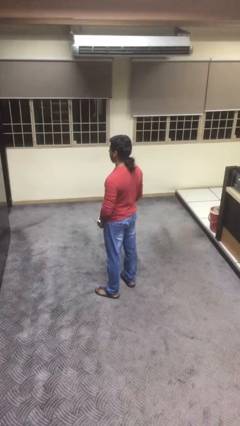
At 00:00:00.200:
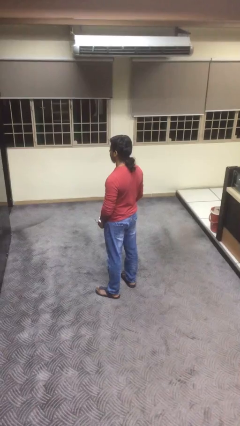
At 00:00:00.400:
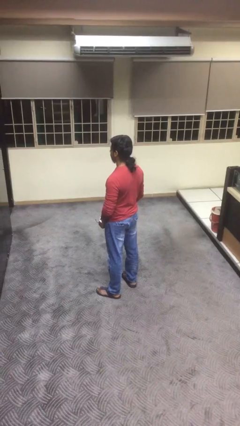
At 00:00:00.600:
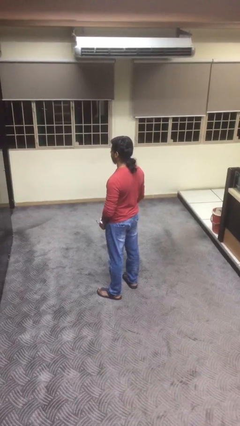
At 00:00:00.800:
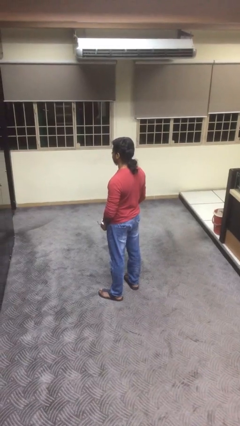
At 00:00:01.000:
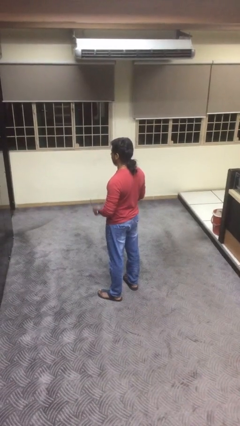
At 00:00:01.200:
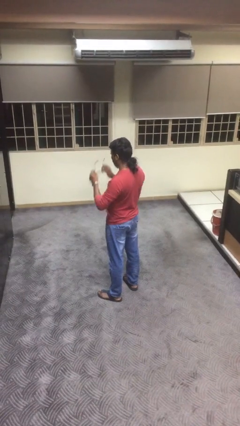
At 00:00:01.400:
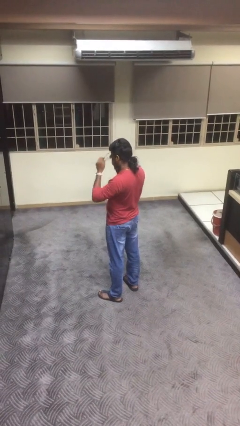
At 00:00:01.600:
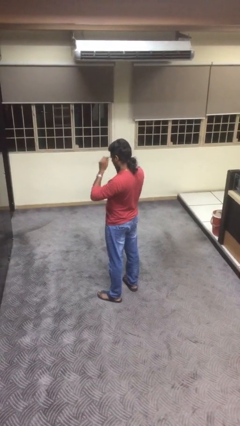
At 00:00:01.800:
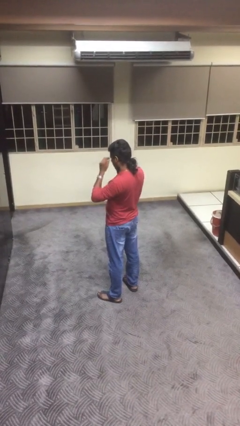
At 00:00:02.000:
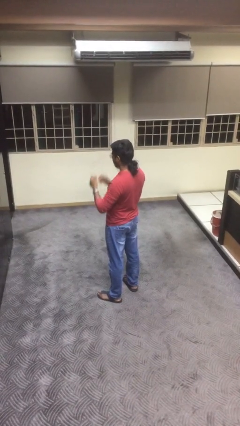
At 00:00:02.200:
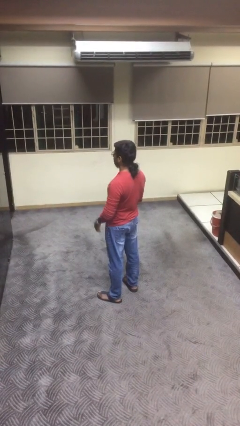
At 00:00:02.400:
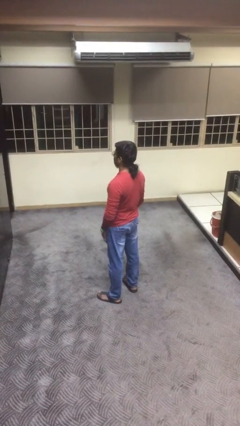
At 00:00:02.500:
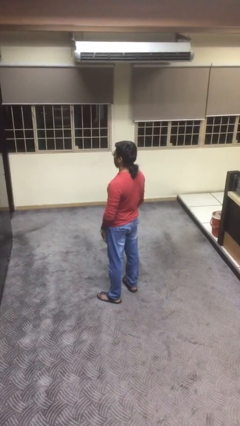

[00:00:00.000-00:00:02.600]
person puts on glasses

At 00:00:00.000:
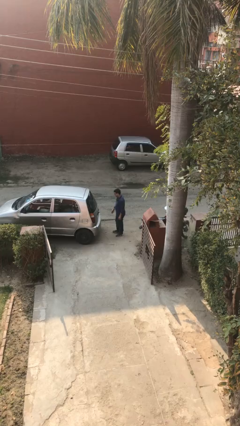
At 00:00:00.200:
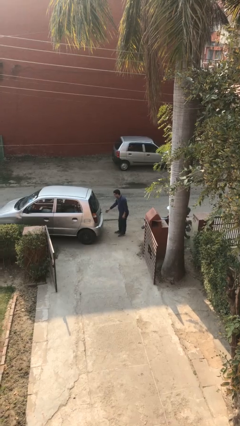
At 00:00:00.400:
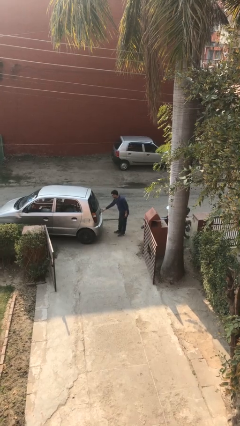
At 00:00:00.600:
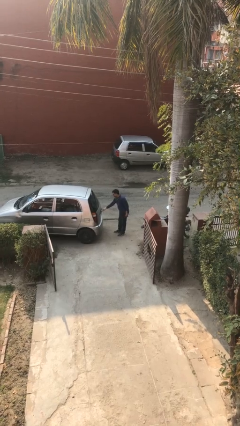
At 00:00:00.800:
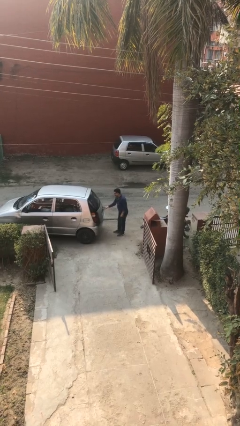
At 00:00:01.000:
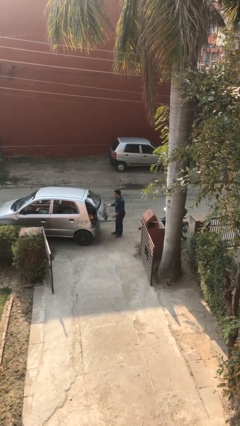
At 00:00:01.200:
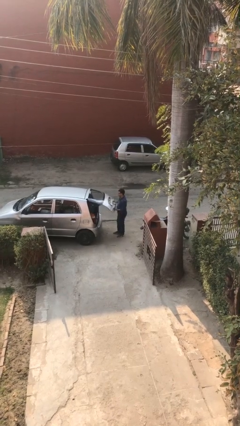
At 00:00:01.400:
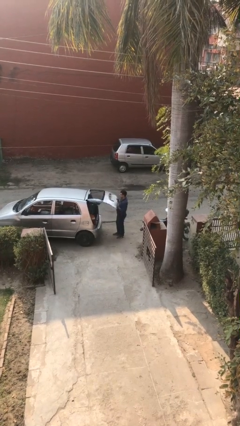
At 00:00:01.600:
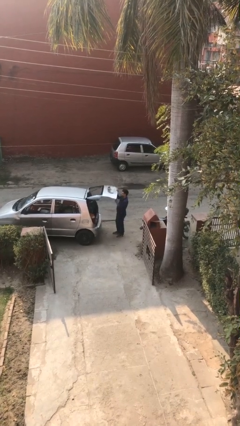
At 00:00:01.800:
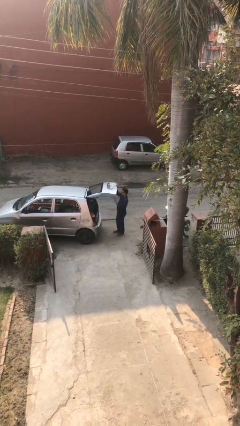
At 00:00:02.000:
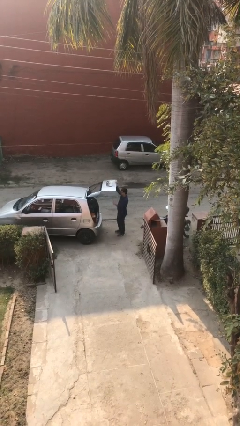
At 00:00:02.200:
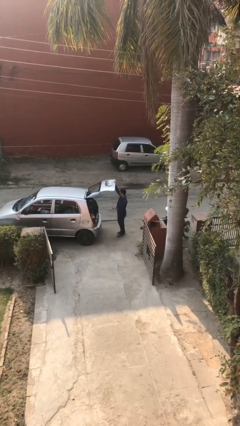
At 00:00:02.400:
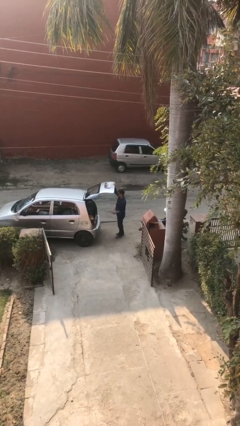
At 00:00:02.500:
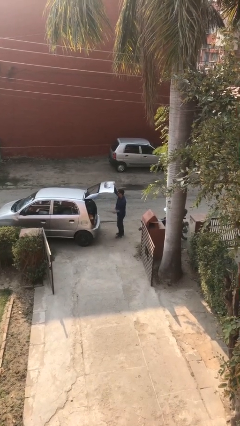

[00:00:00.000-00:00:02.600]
person opens car trunk

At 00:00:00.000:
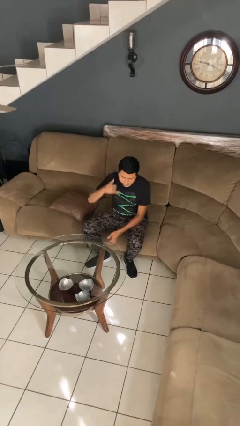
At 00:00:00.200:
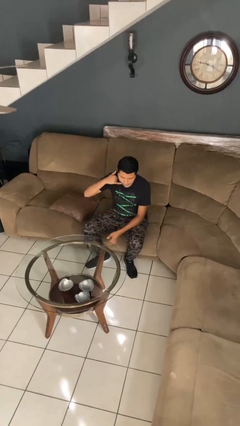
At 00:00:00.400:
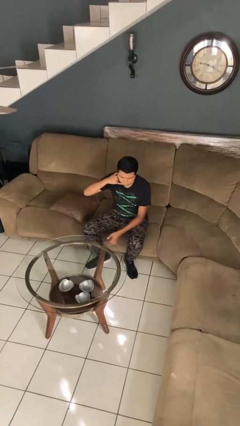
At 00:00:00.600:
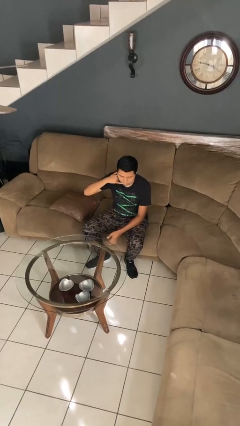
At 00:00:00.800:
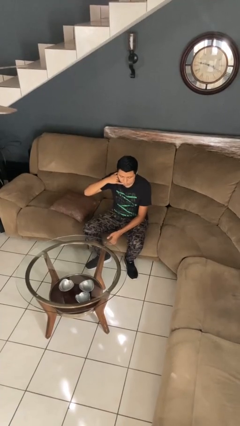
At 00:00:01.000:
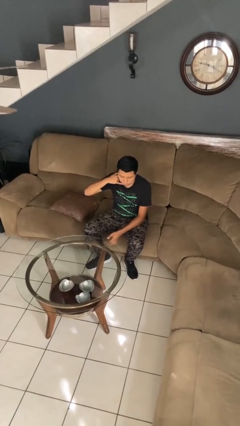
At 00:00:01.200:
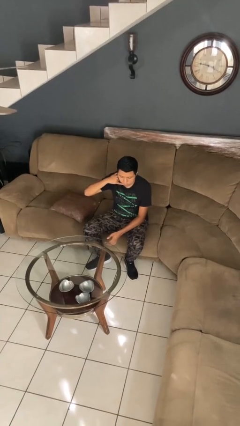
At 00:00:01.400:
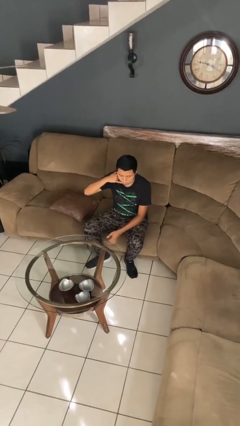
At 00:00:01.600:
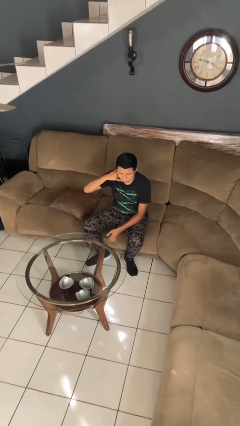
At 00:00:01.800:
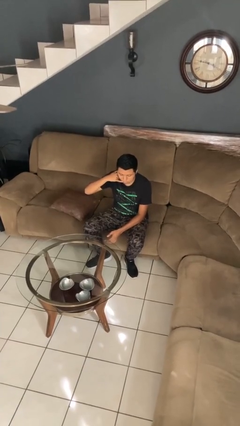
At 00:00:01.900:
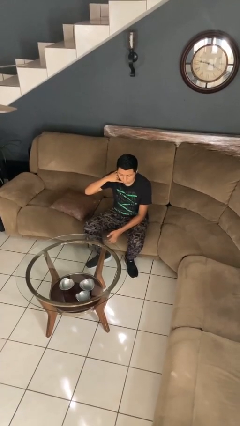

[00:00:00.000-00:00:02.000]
person gestures call me

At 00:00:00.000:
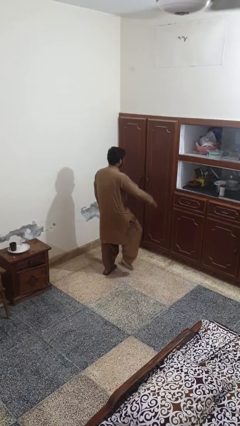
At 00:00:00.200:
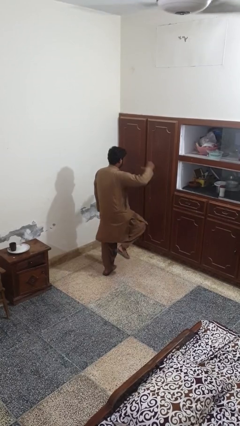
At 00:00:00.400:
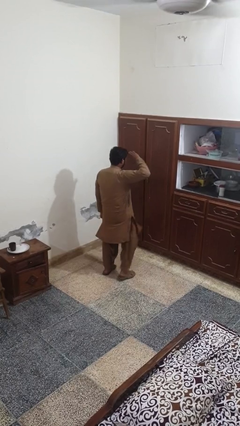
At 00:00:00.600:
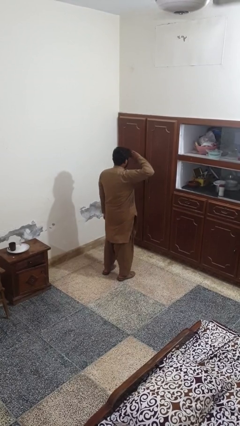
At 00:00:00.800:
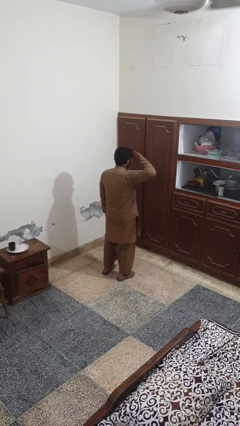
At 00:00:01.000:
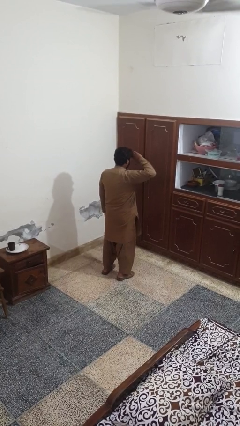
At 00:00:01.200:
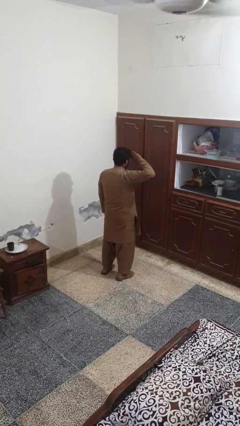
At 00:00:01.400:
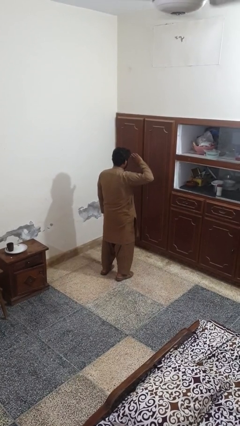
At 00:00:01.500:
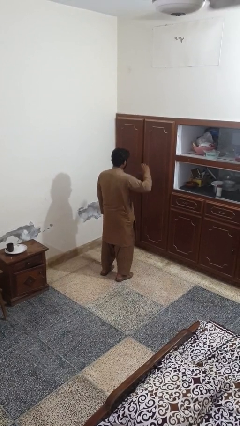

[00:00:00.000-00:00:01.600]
person salutes

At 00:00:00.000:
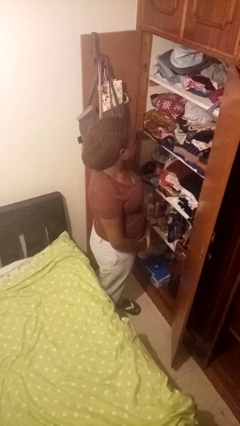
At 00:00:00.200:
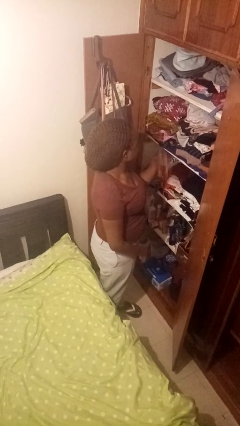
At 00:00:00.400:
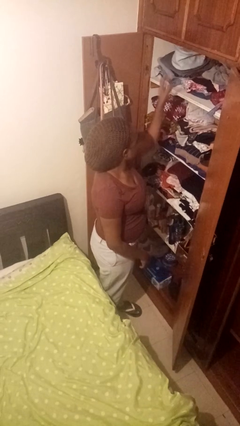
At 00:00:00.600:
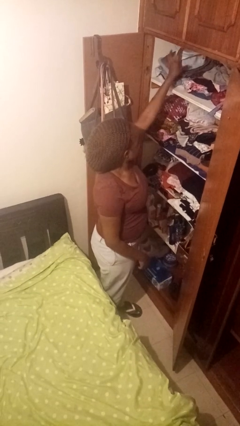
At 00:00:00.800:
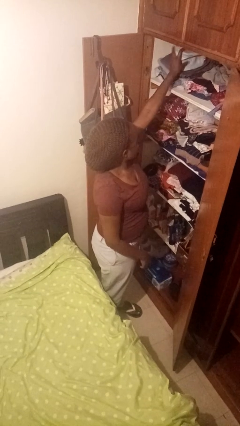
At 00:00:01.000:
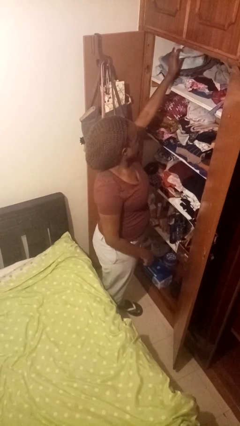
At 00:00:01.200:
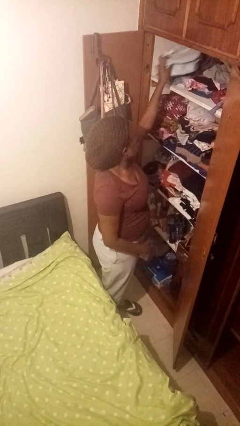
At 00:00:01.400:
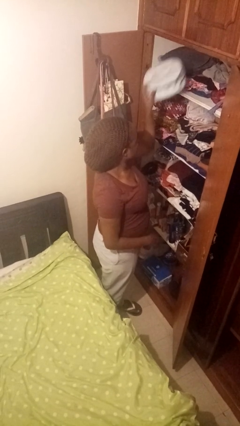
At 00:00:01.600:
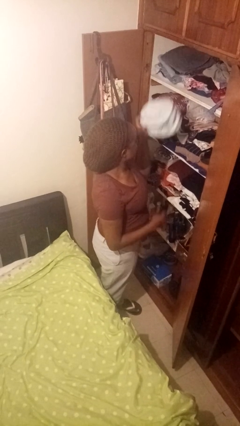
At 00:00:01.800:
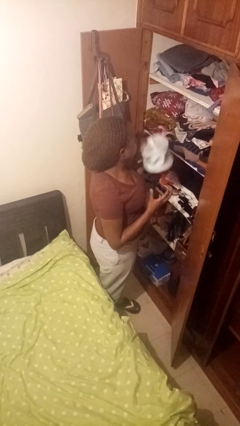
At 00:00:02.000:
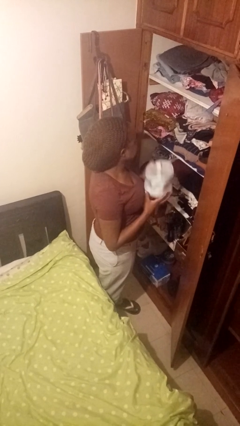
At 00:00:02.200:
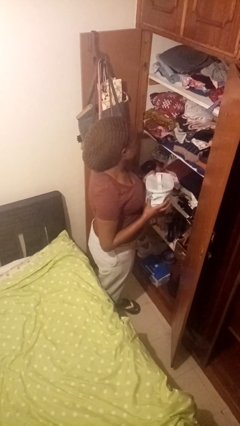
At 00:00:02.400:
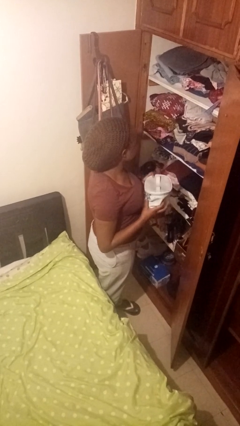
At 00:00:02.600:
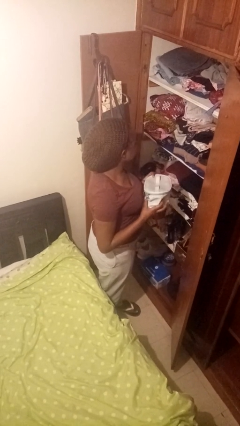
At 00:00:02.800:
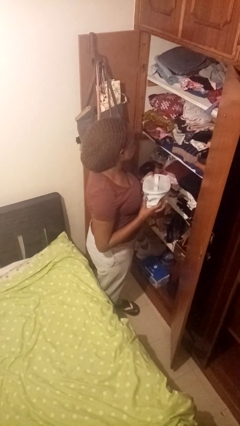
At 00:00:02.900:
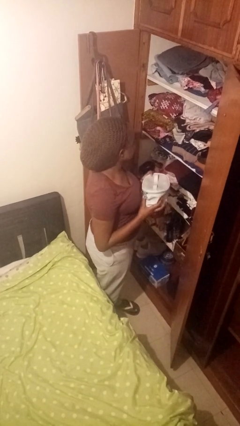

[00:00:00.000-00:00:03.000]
person picks up object from shelf

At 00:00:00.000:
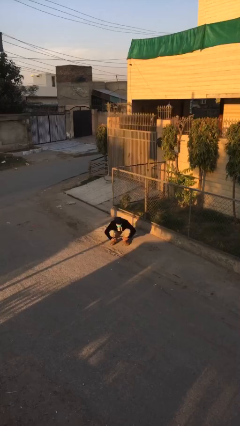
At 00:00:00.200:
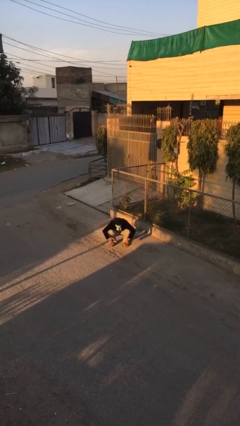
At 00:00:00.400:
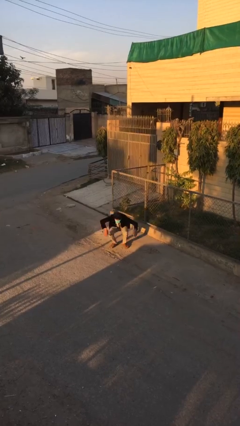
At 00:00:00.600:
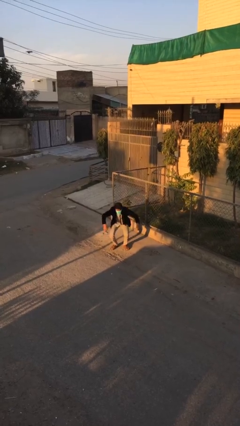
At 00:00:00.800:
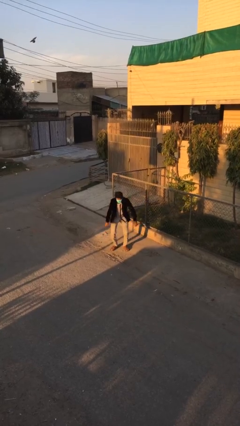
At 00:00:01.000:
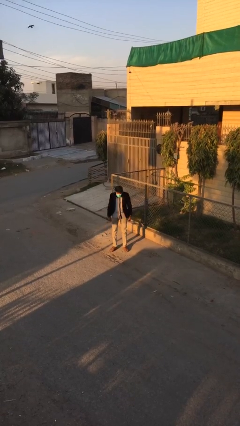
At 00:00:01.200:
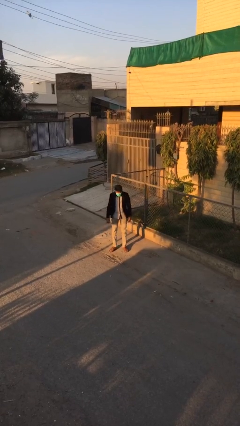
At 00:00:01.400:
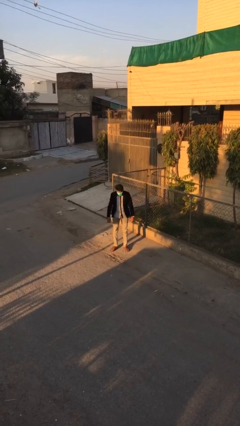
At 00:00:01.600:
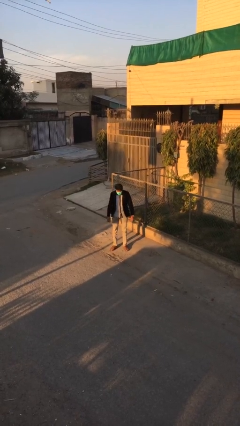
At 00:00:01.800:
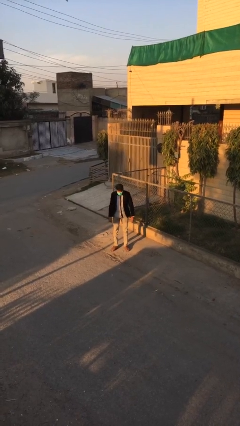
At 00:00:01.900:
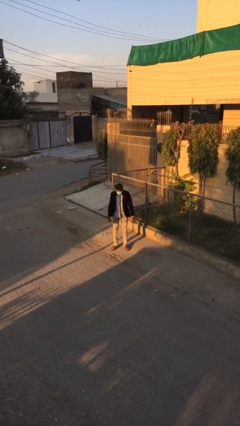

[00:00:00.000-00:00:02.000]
person stands up

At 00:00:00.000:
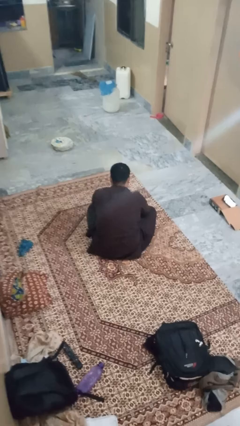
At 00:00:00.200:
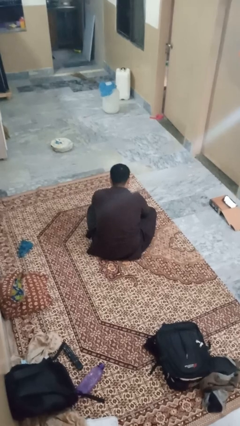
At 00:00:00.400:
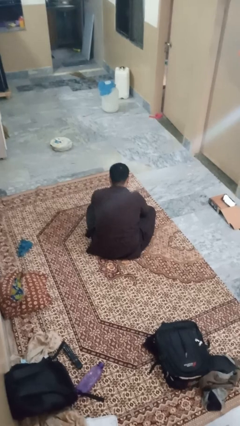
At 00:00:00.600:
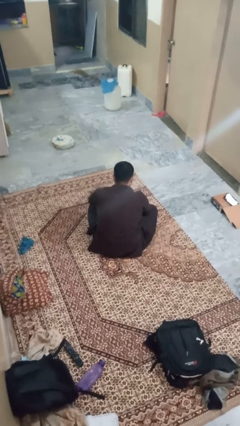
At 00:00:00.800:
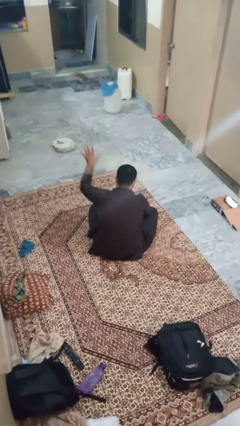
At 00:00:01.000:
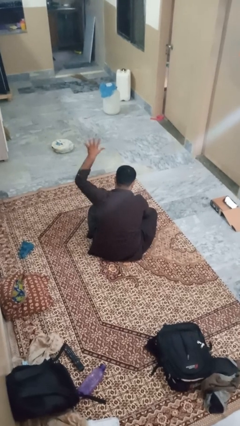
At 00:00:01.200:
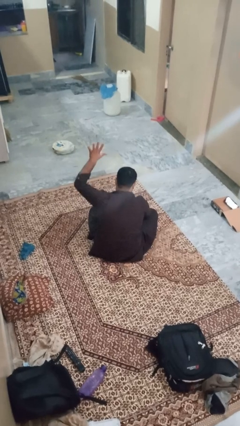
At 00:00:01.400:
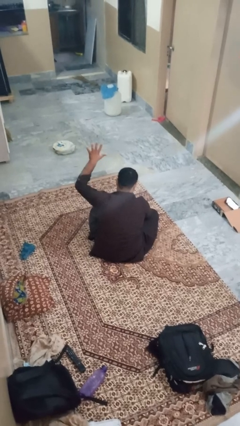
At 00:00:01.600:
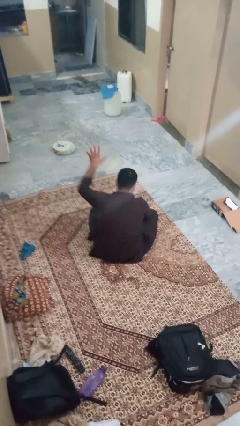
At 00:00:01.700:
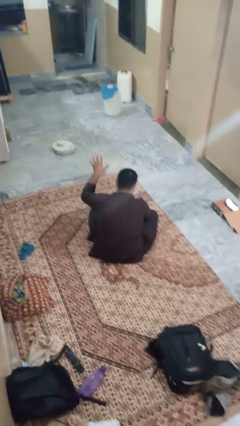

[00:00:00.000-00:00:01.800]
person gestures number five

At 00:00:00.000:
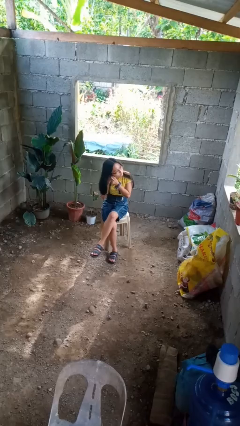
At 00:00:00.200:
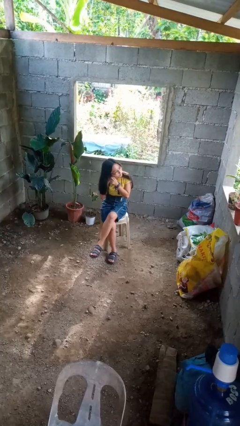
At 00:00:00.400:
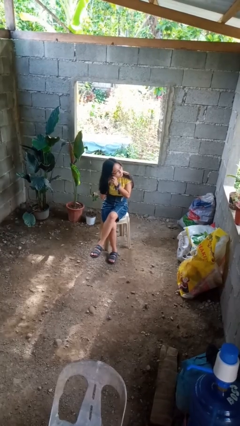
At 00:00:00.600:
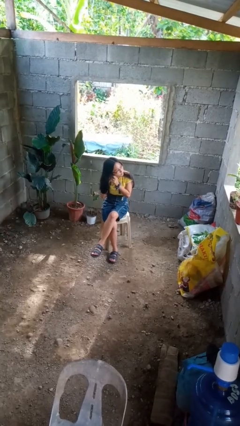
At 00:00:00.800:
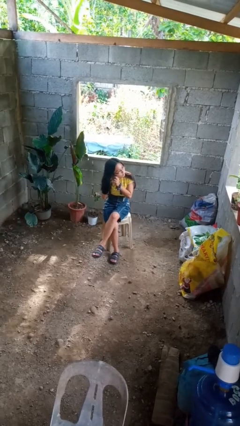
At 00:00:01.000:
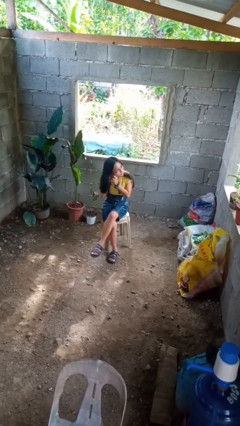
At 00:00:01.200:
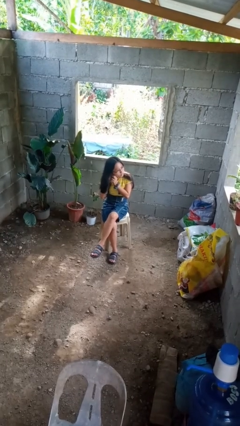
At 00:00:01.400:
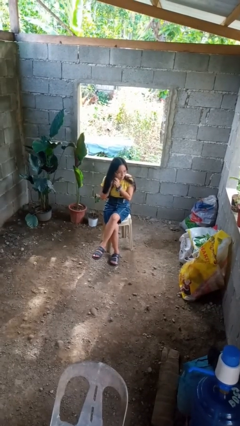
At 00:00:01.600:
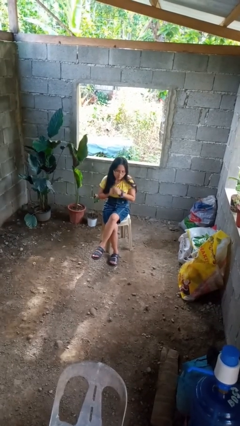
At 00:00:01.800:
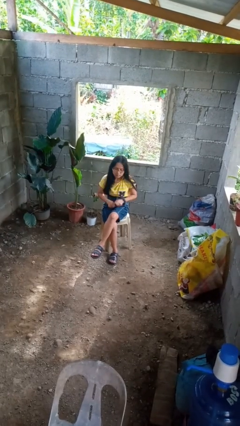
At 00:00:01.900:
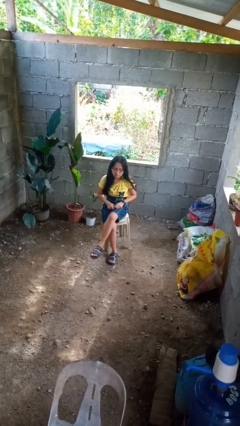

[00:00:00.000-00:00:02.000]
person takes off earrings